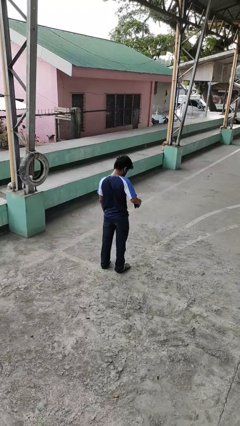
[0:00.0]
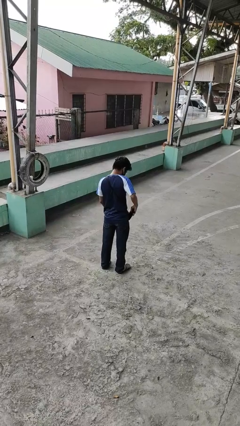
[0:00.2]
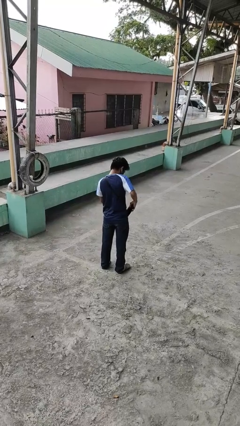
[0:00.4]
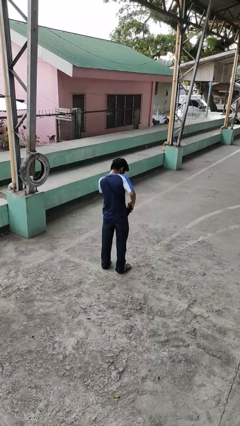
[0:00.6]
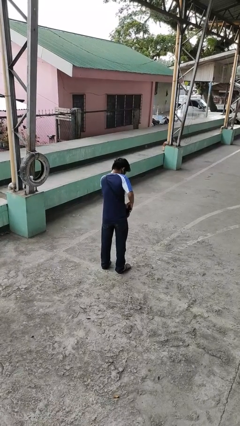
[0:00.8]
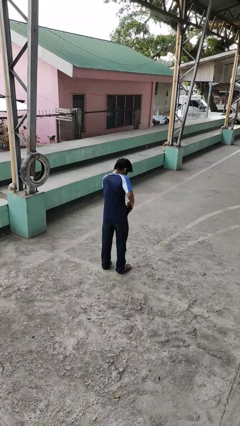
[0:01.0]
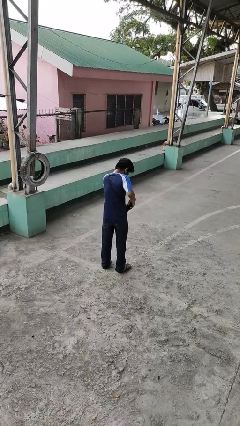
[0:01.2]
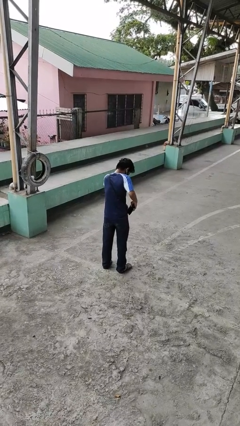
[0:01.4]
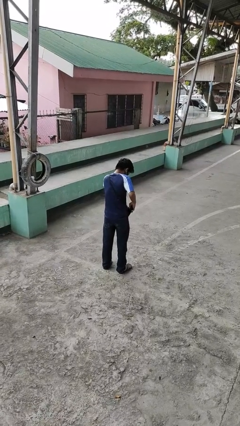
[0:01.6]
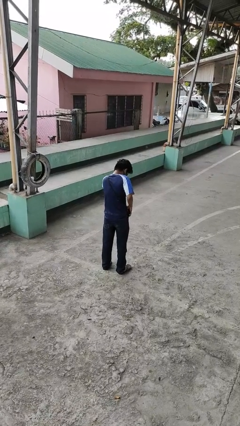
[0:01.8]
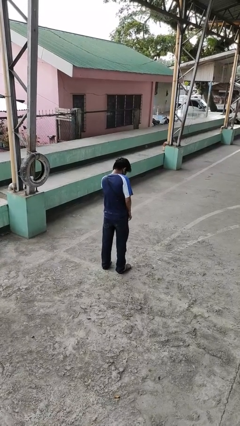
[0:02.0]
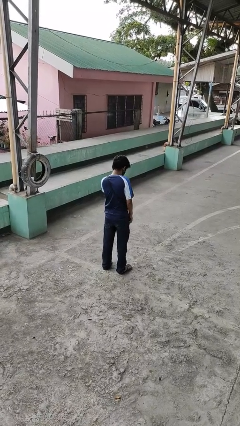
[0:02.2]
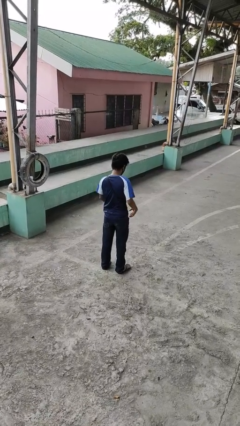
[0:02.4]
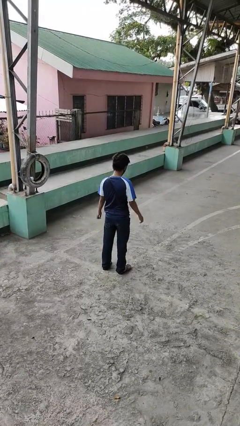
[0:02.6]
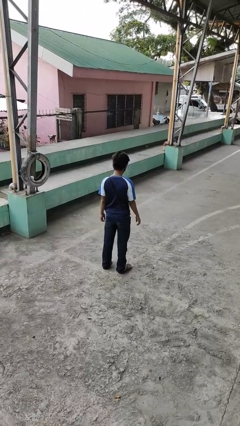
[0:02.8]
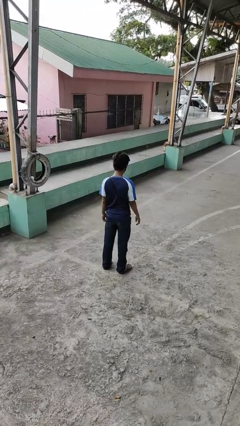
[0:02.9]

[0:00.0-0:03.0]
person puts phone into pocket

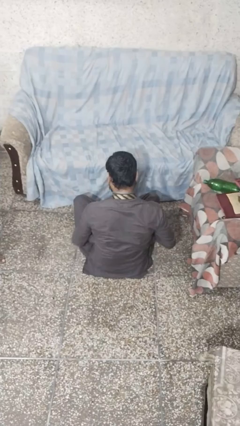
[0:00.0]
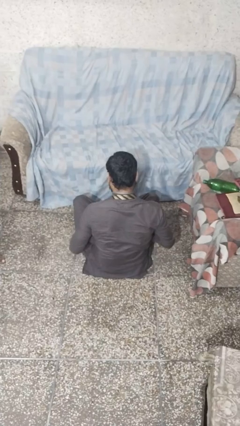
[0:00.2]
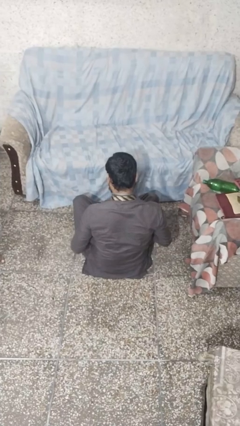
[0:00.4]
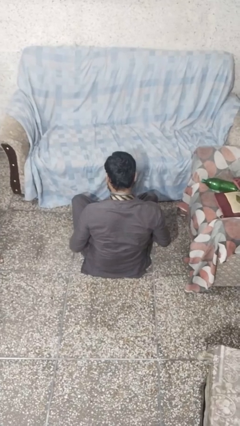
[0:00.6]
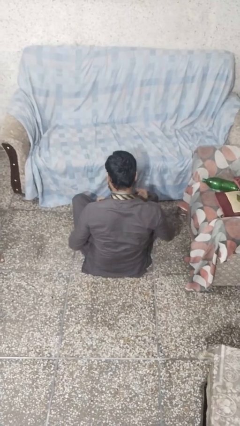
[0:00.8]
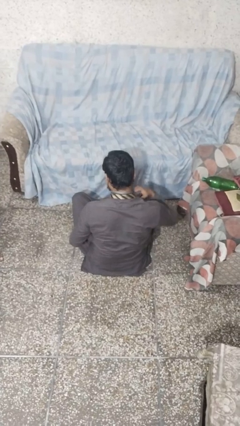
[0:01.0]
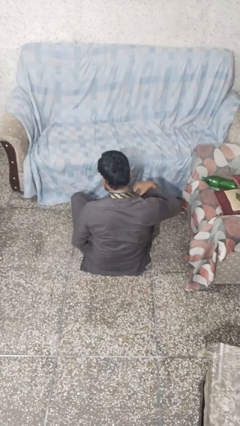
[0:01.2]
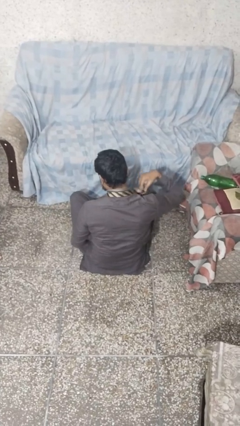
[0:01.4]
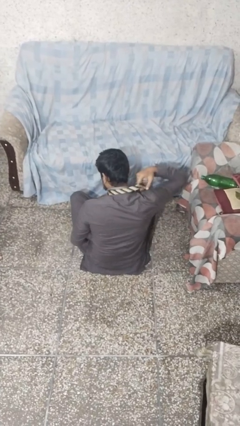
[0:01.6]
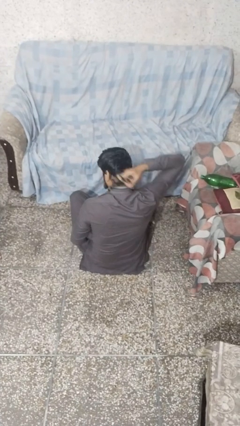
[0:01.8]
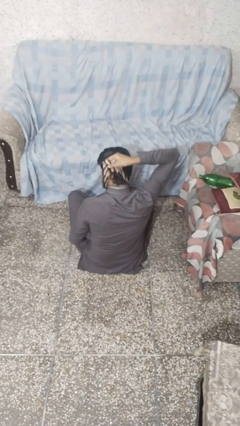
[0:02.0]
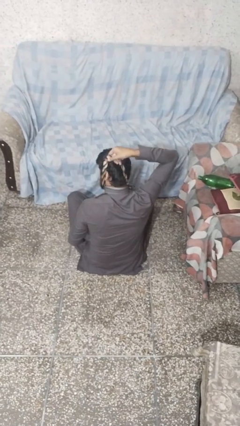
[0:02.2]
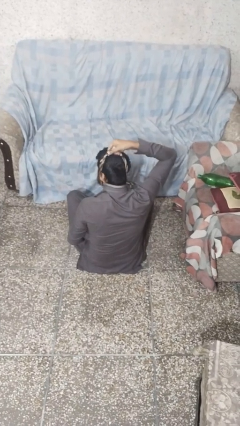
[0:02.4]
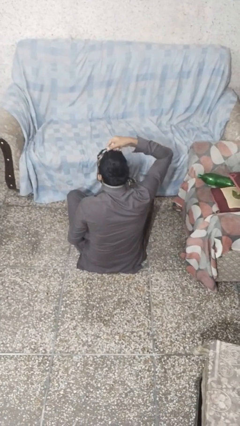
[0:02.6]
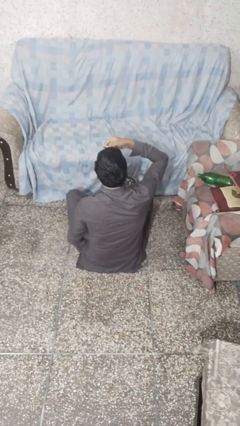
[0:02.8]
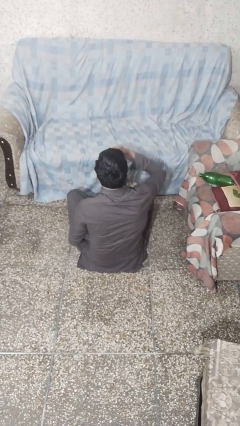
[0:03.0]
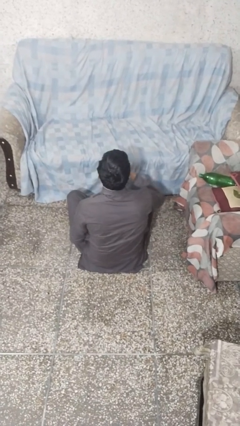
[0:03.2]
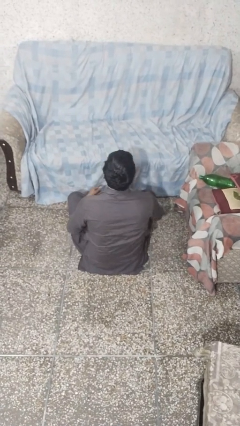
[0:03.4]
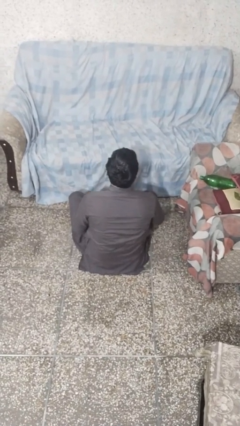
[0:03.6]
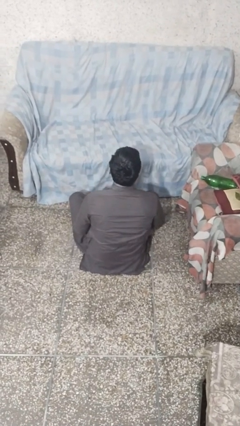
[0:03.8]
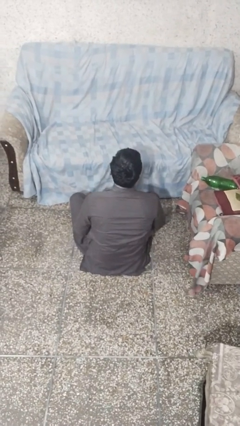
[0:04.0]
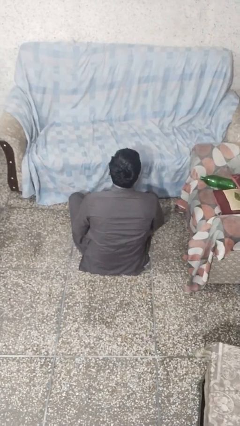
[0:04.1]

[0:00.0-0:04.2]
person takes off necktie

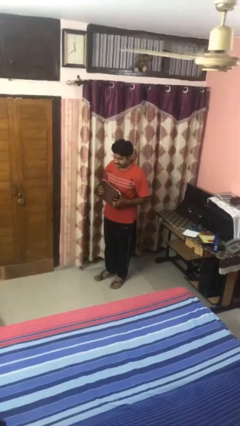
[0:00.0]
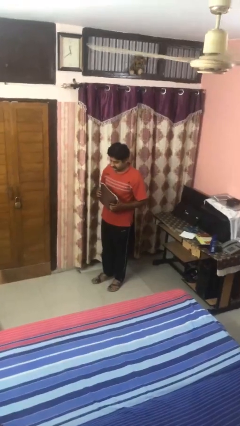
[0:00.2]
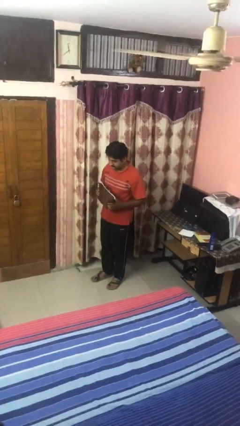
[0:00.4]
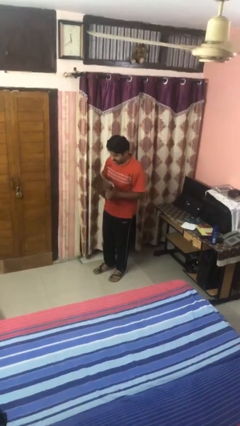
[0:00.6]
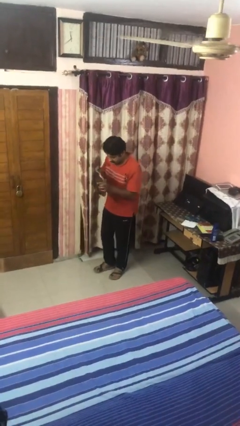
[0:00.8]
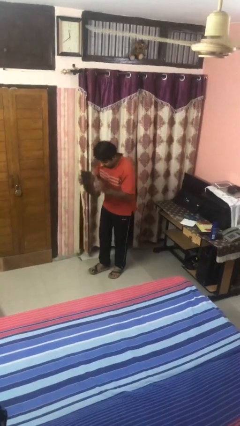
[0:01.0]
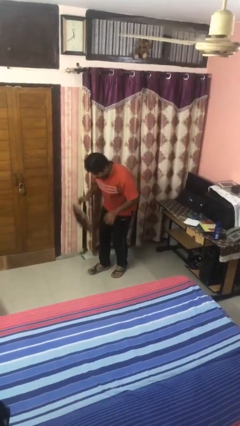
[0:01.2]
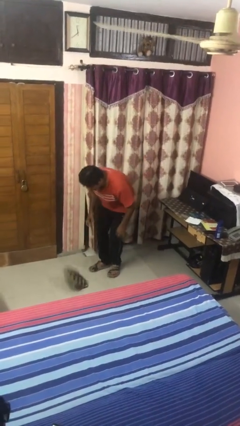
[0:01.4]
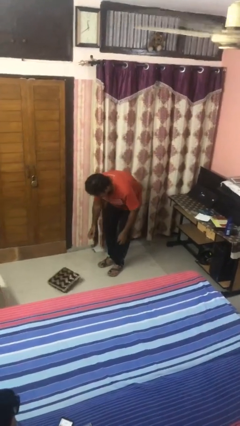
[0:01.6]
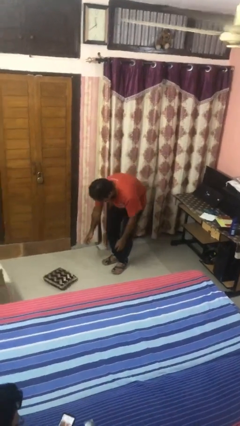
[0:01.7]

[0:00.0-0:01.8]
person drops object

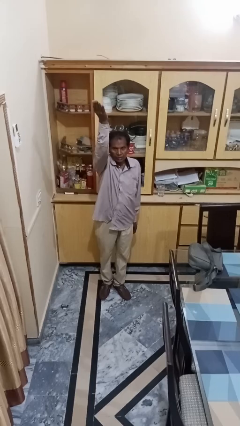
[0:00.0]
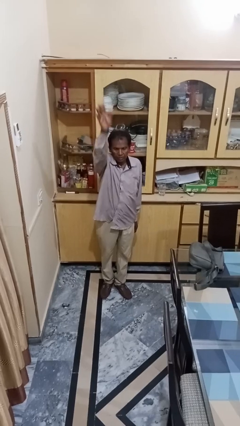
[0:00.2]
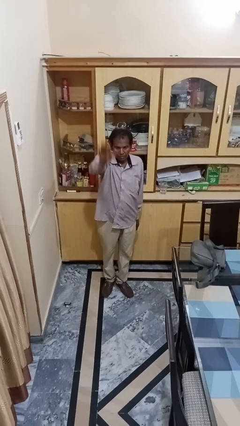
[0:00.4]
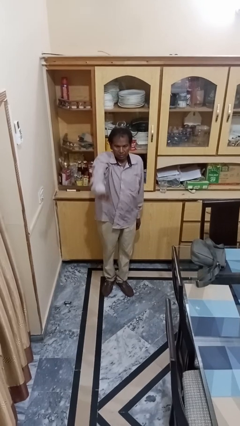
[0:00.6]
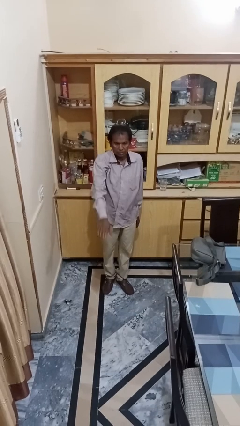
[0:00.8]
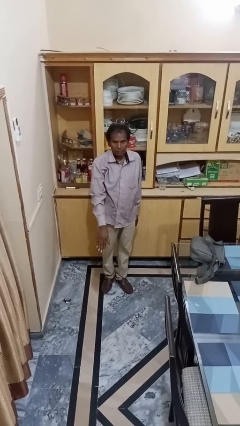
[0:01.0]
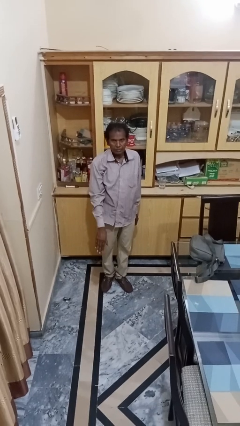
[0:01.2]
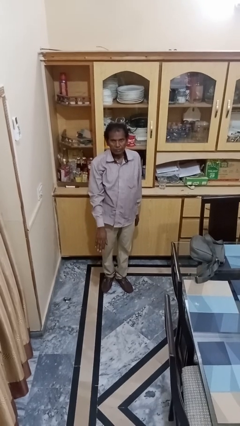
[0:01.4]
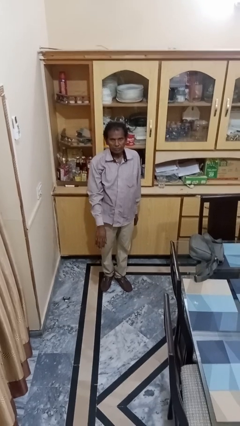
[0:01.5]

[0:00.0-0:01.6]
person gestures swipe down

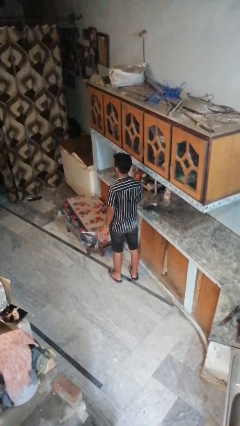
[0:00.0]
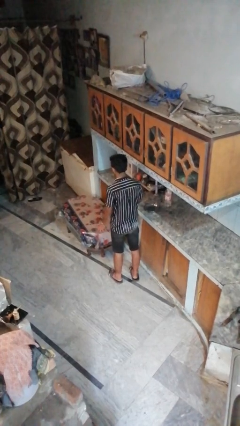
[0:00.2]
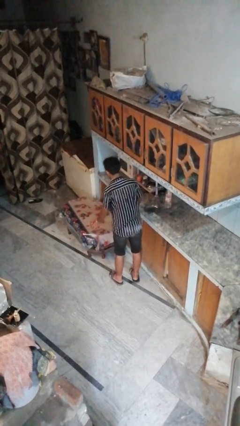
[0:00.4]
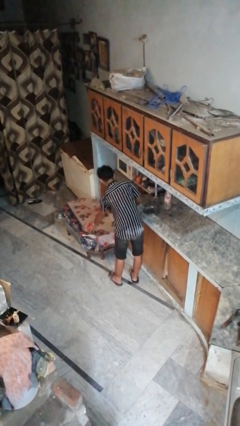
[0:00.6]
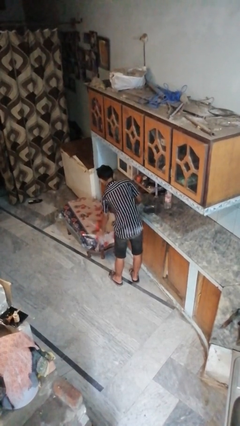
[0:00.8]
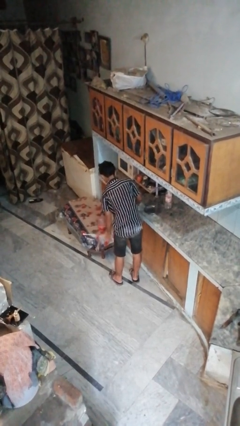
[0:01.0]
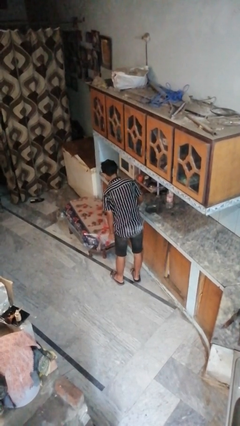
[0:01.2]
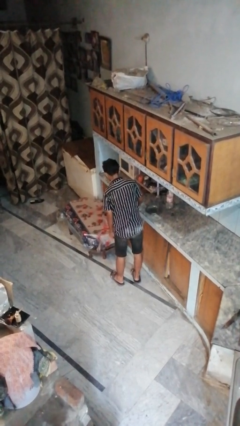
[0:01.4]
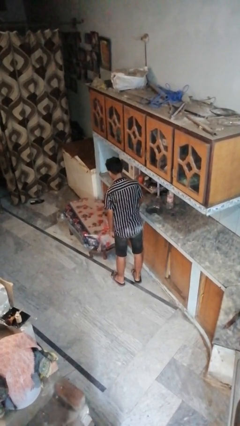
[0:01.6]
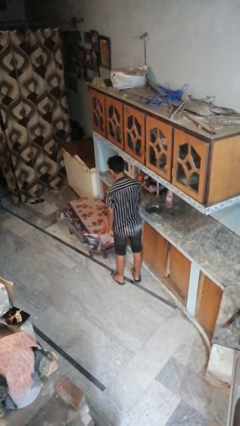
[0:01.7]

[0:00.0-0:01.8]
person throws object on table

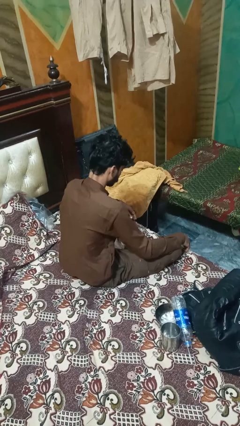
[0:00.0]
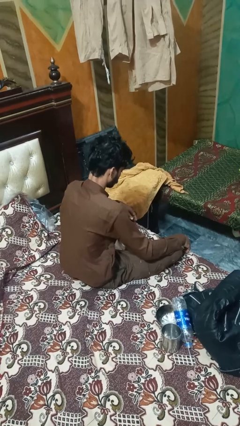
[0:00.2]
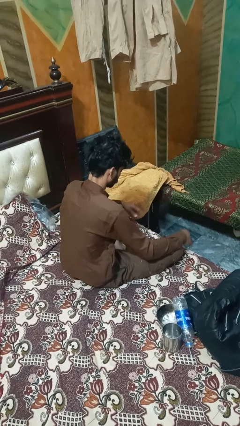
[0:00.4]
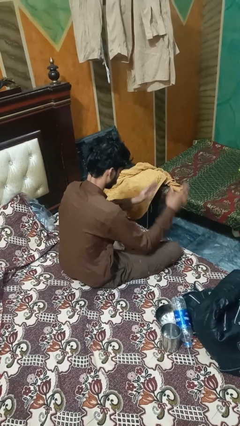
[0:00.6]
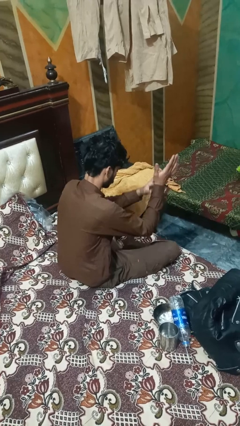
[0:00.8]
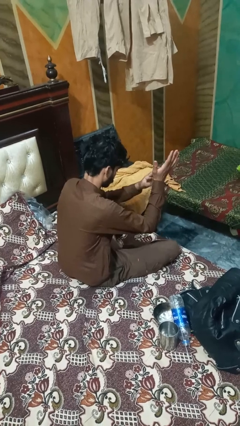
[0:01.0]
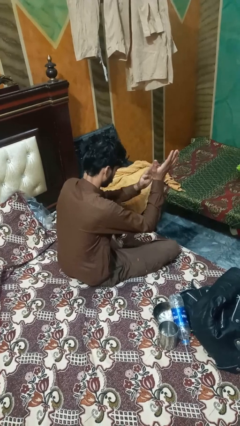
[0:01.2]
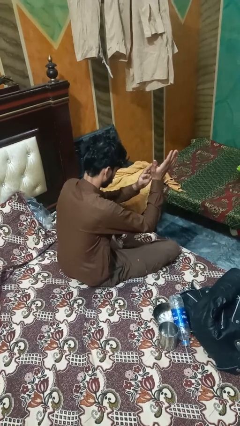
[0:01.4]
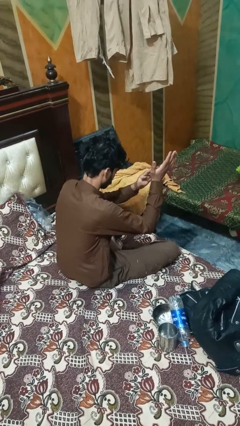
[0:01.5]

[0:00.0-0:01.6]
person claps hands

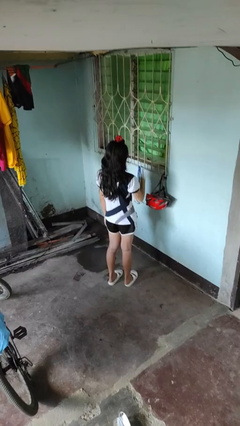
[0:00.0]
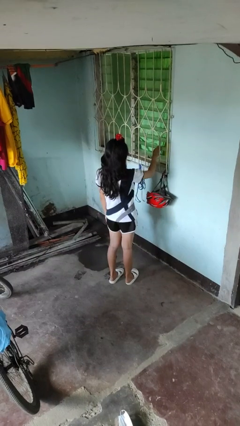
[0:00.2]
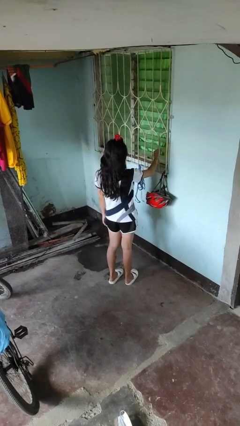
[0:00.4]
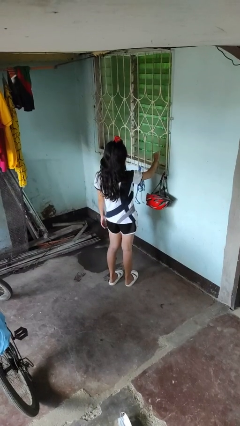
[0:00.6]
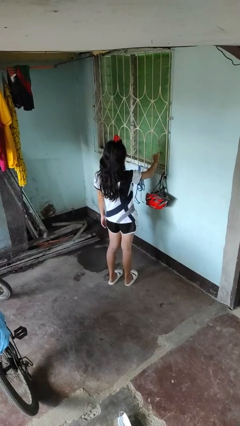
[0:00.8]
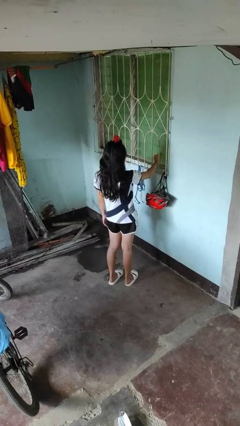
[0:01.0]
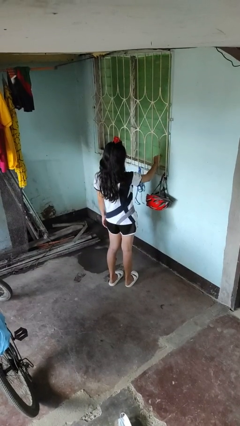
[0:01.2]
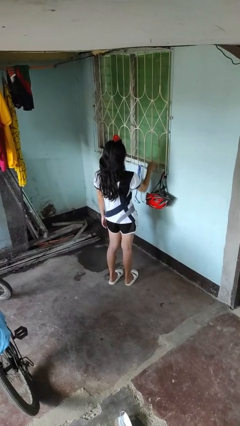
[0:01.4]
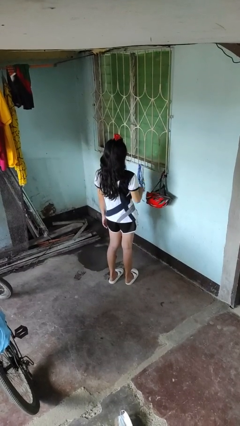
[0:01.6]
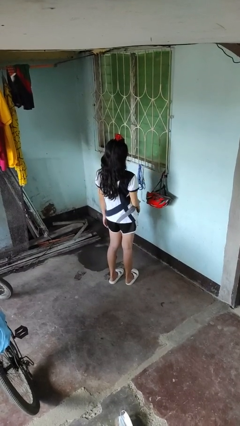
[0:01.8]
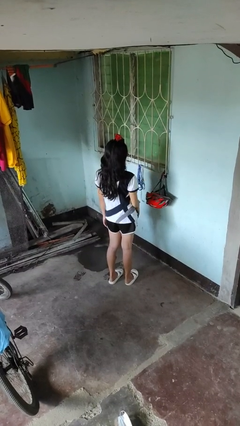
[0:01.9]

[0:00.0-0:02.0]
person closes home window

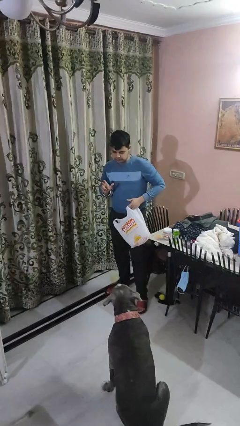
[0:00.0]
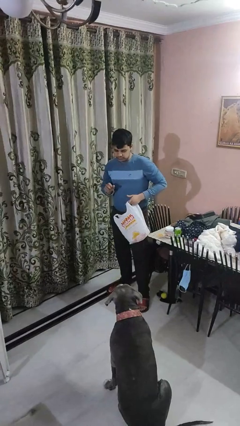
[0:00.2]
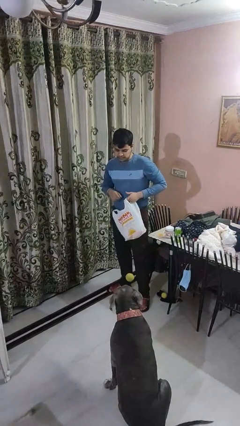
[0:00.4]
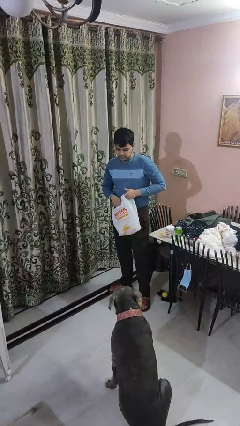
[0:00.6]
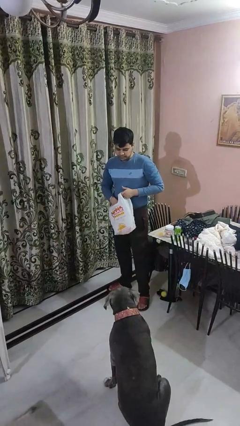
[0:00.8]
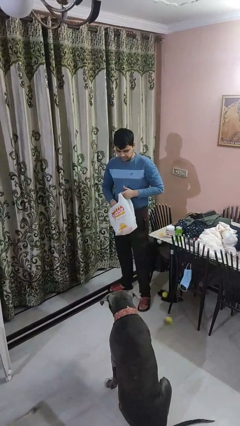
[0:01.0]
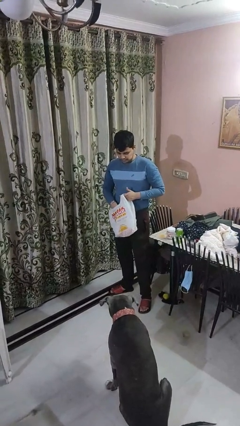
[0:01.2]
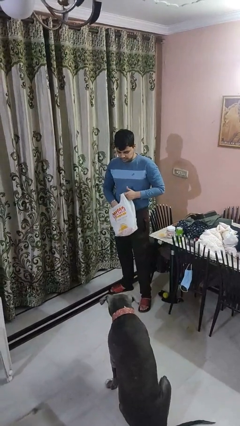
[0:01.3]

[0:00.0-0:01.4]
person throws object to dog
